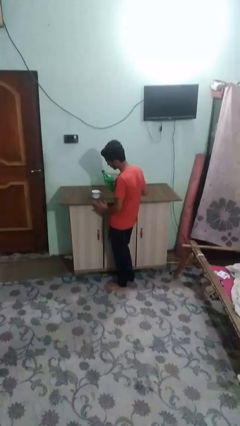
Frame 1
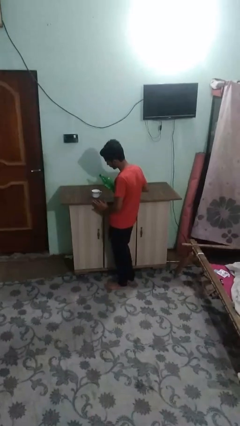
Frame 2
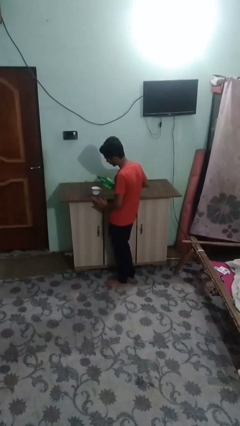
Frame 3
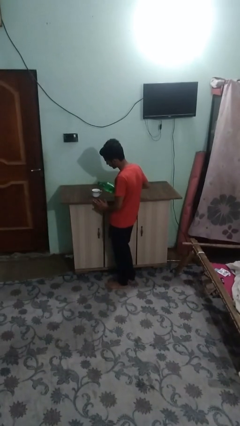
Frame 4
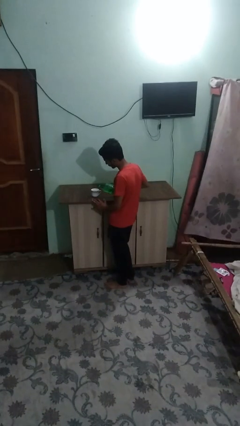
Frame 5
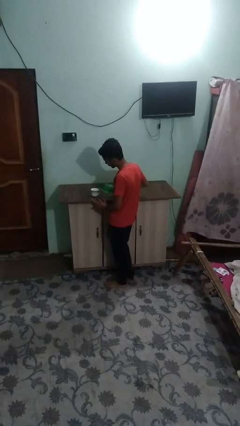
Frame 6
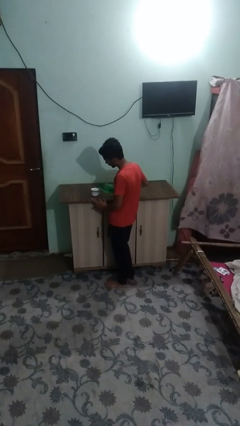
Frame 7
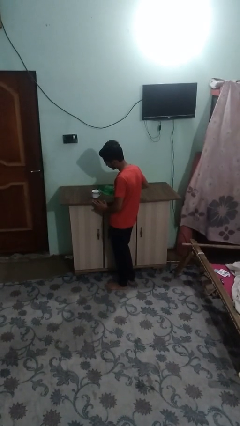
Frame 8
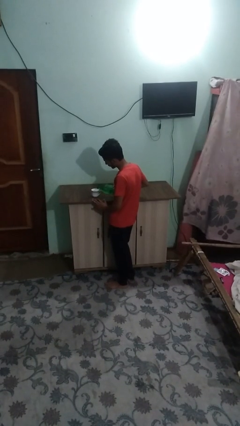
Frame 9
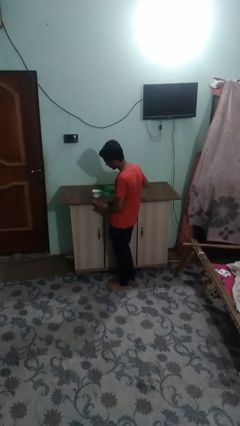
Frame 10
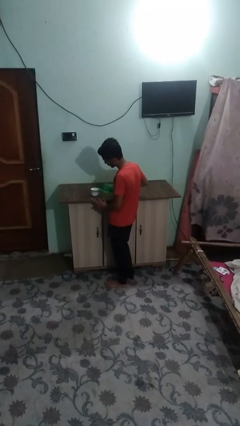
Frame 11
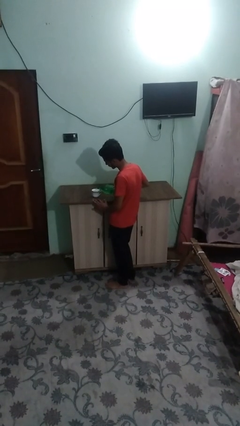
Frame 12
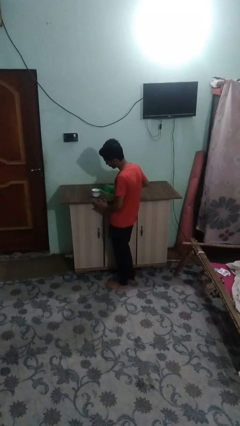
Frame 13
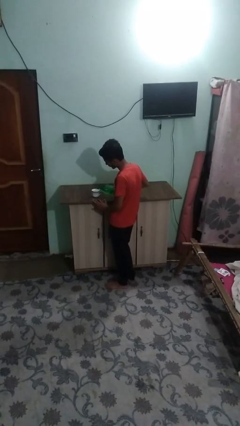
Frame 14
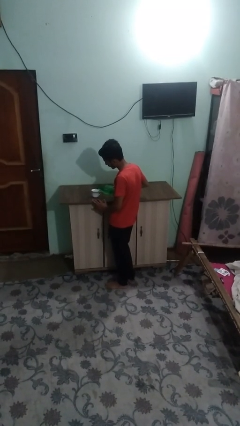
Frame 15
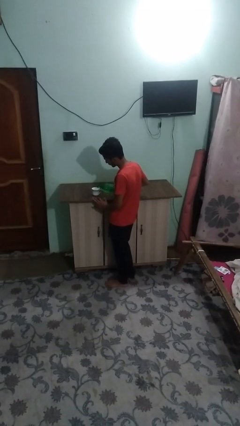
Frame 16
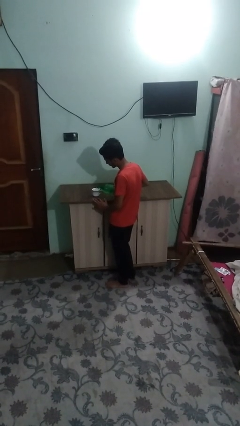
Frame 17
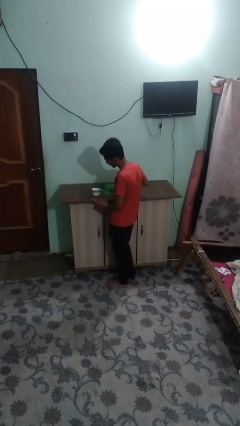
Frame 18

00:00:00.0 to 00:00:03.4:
person pours liquid into cup

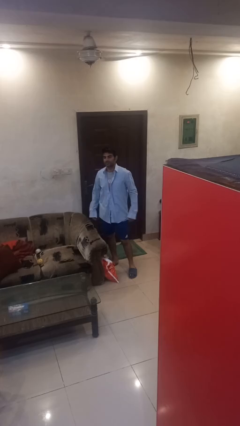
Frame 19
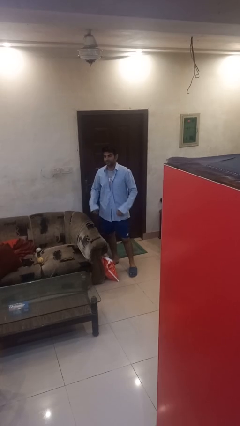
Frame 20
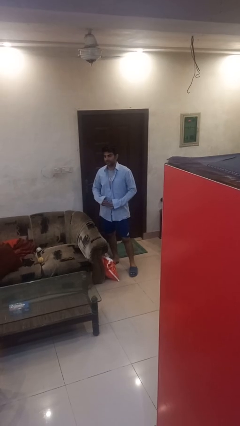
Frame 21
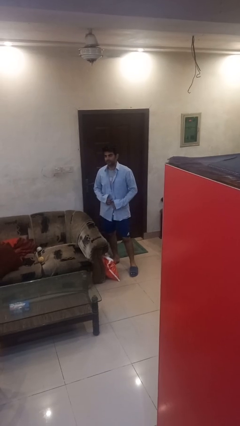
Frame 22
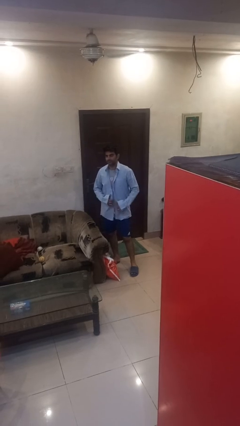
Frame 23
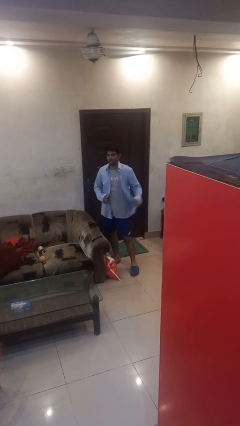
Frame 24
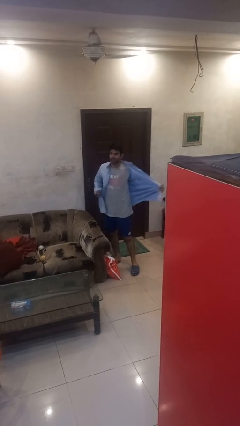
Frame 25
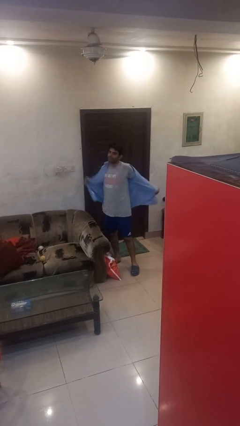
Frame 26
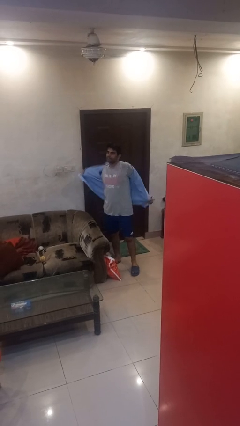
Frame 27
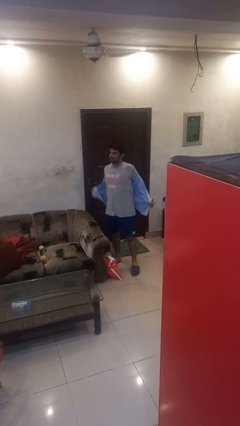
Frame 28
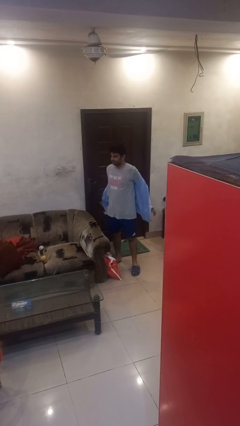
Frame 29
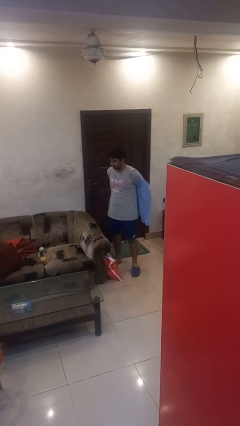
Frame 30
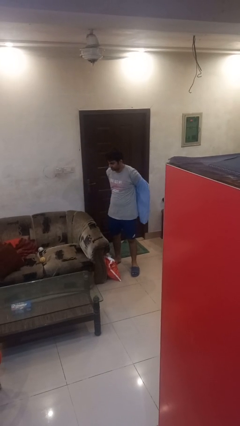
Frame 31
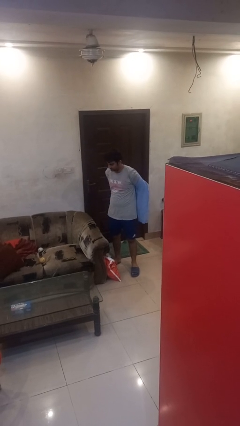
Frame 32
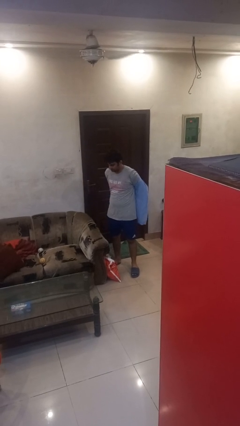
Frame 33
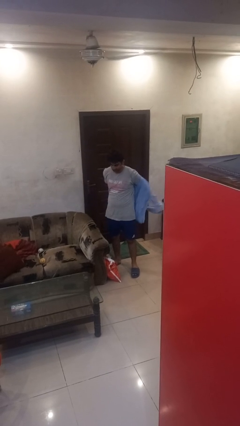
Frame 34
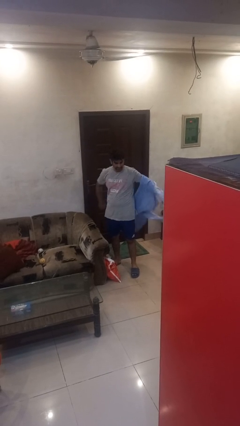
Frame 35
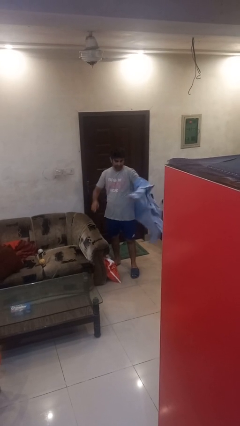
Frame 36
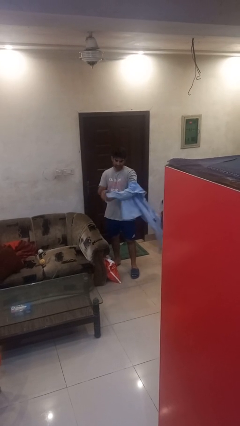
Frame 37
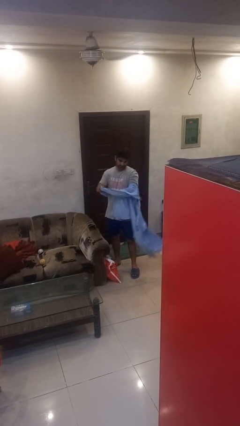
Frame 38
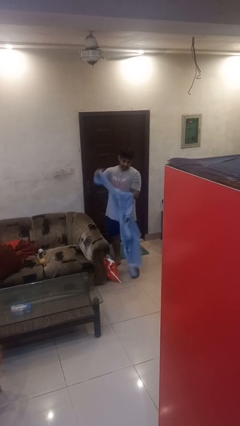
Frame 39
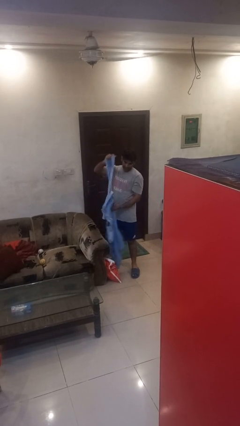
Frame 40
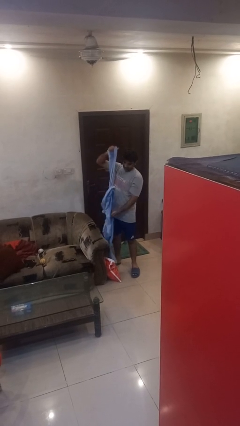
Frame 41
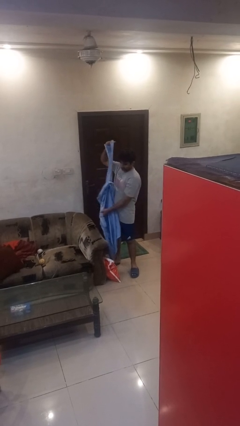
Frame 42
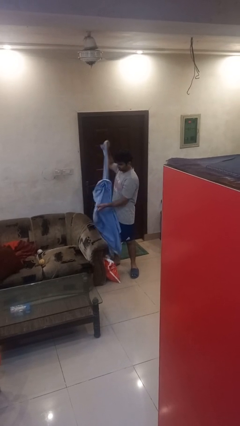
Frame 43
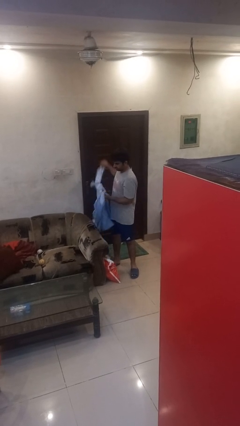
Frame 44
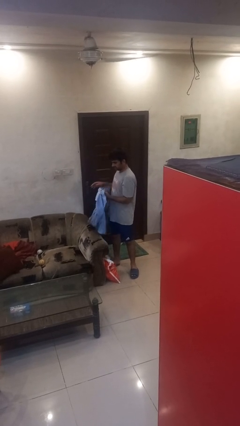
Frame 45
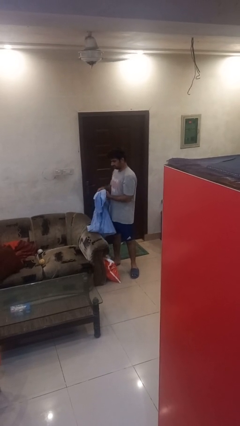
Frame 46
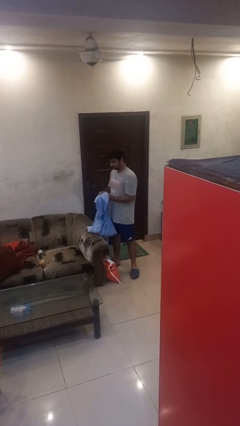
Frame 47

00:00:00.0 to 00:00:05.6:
person takes off shirt

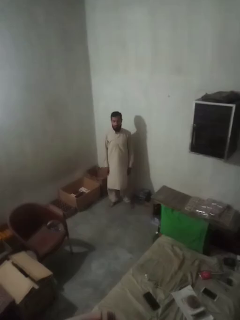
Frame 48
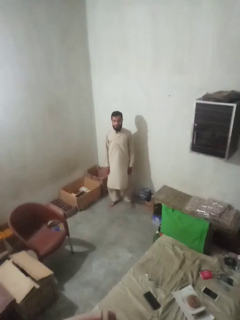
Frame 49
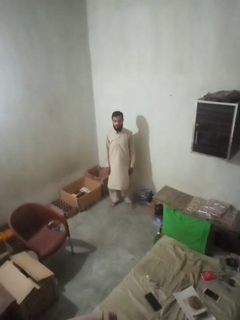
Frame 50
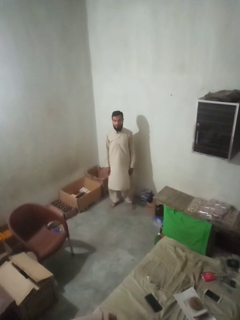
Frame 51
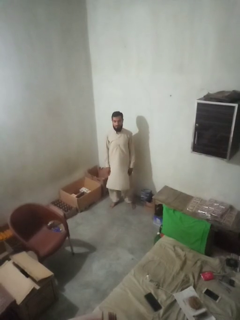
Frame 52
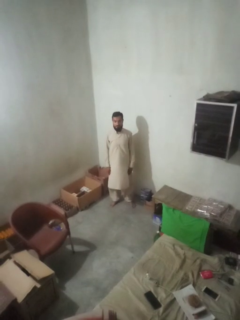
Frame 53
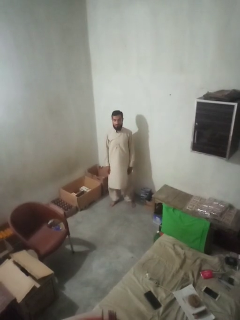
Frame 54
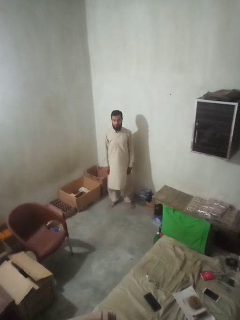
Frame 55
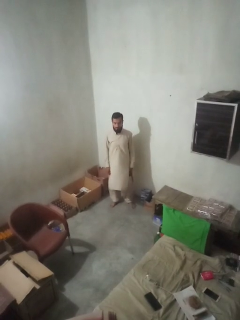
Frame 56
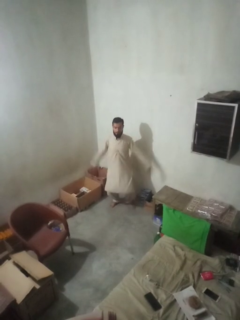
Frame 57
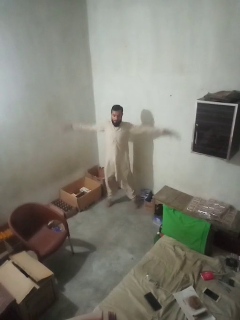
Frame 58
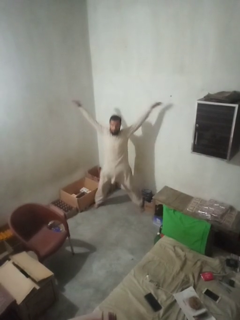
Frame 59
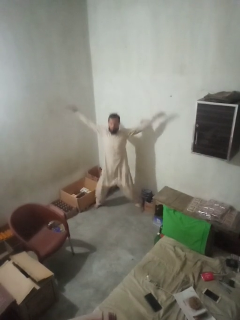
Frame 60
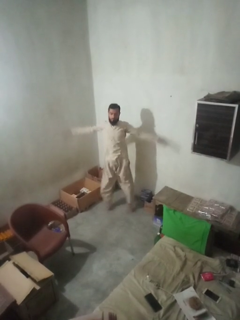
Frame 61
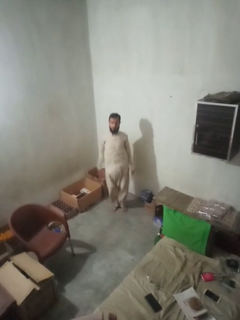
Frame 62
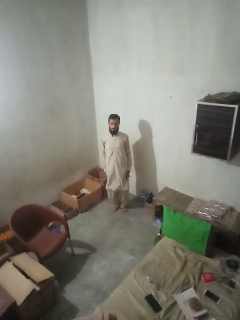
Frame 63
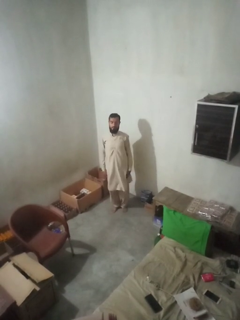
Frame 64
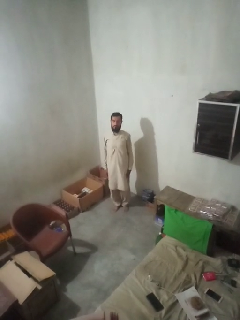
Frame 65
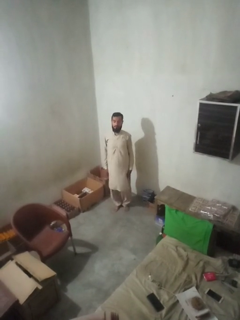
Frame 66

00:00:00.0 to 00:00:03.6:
person exercises with jumping jacks

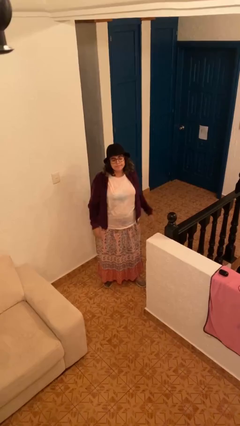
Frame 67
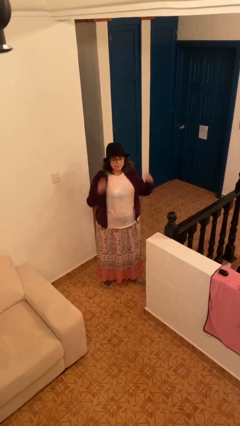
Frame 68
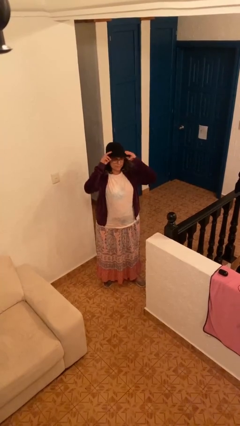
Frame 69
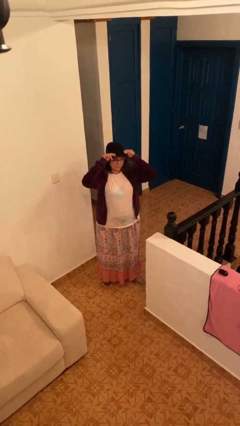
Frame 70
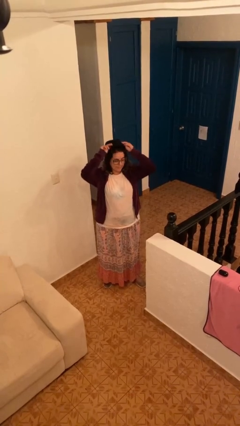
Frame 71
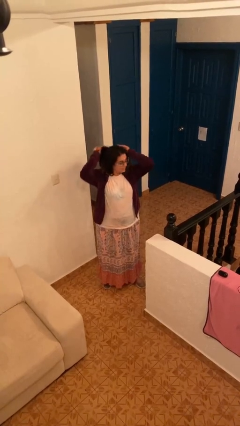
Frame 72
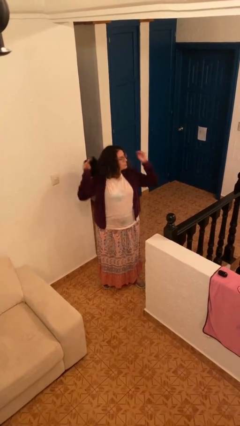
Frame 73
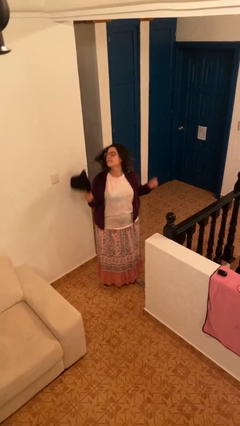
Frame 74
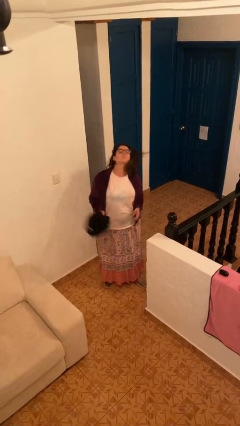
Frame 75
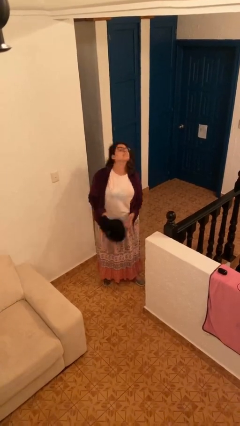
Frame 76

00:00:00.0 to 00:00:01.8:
person takes off hat

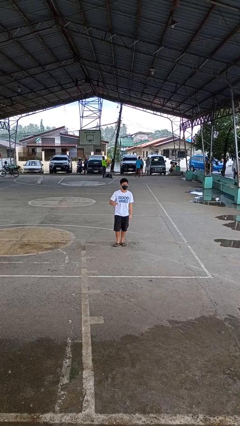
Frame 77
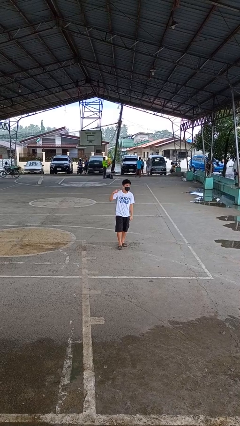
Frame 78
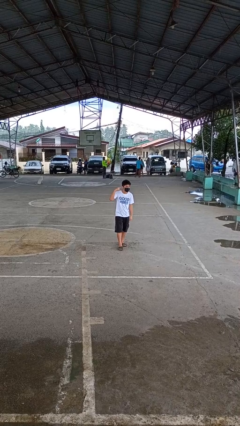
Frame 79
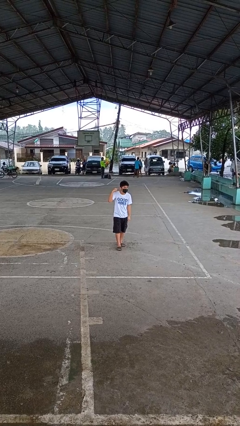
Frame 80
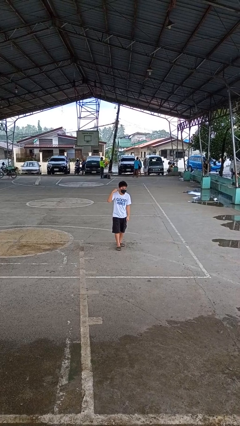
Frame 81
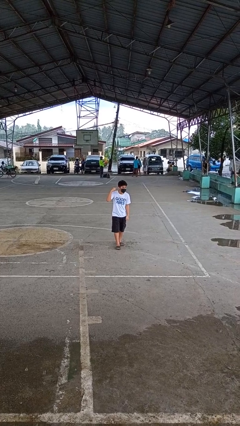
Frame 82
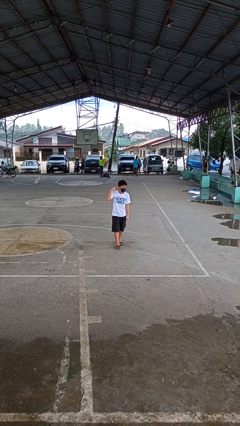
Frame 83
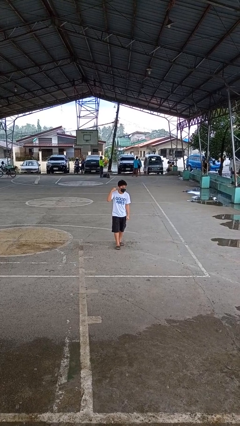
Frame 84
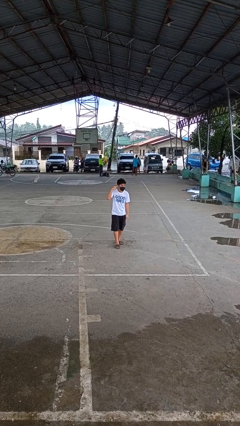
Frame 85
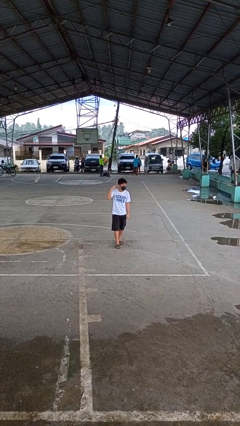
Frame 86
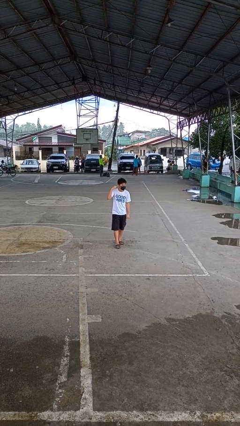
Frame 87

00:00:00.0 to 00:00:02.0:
person gestures listen closely

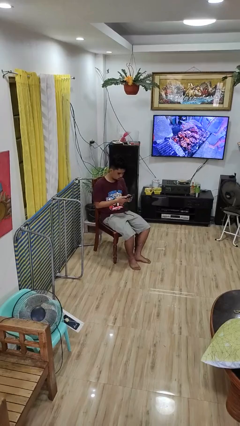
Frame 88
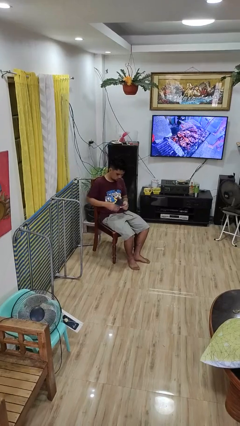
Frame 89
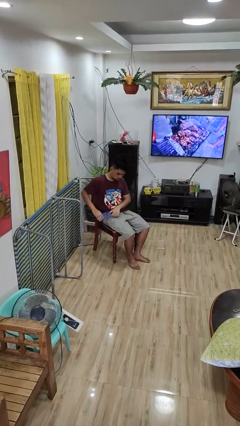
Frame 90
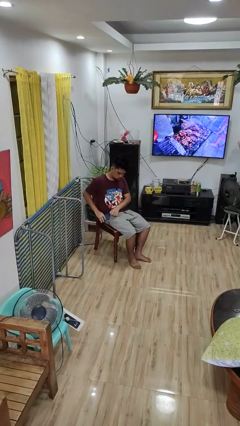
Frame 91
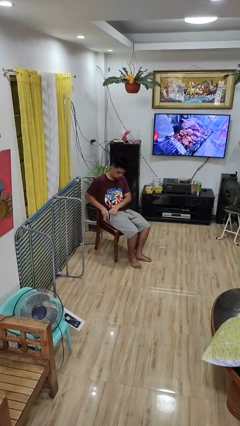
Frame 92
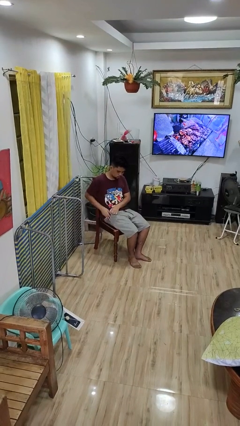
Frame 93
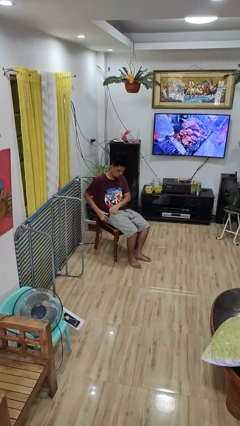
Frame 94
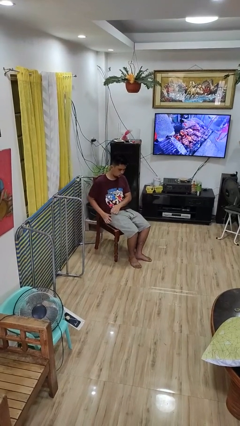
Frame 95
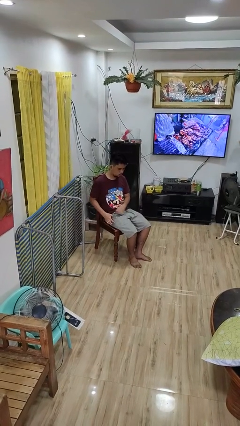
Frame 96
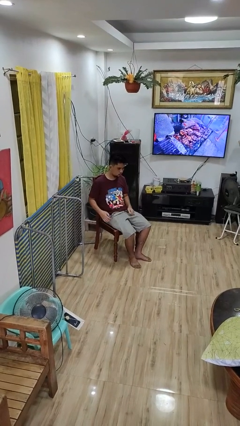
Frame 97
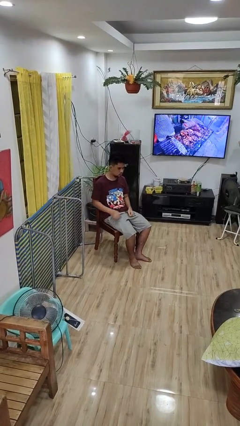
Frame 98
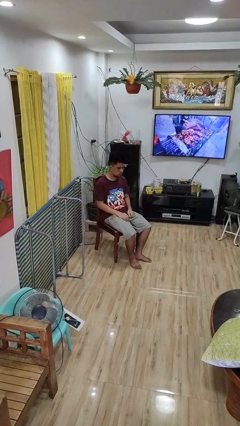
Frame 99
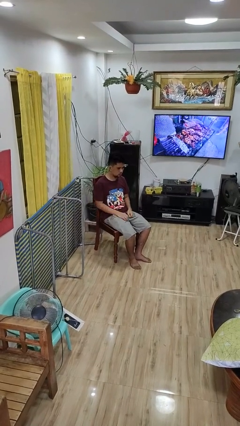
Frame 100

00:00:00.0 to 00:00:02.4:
person puts phone into pocket
